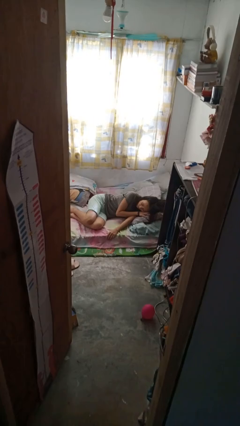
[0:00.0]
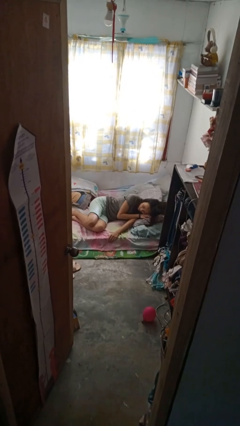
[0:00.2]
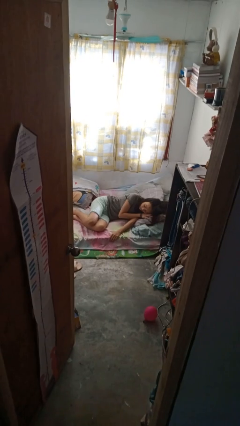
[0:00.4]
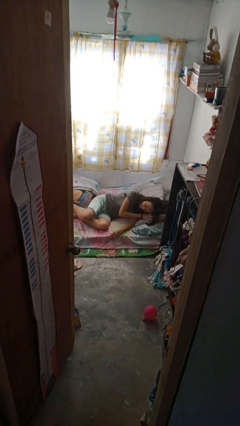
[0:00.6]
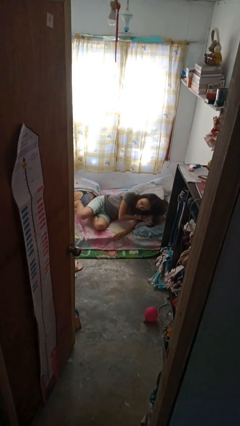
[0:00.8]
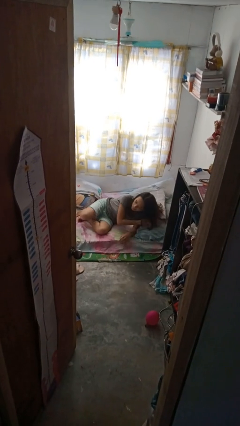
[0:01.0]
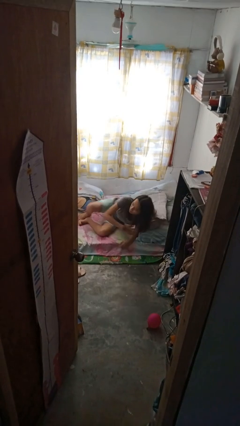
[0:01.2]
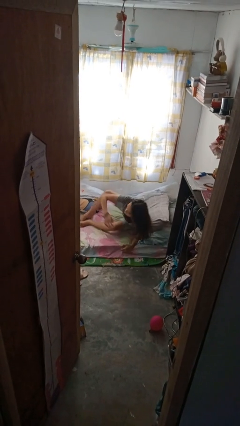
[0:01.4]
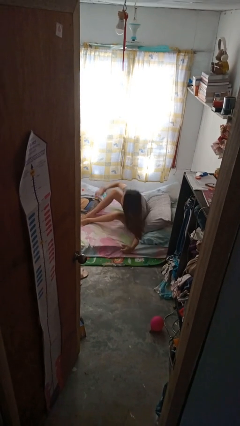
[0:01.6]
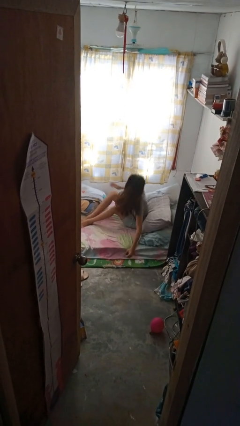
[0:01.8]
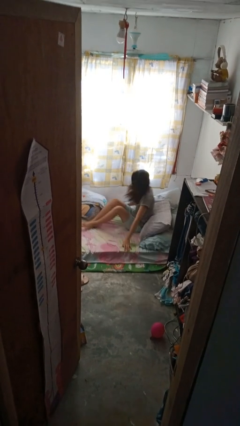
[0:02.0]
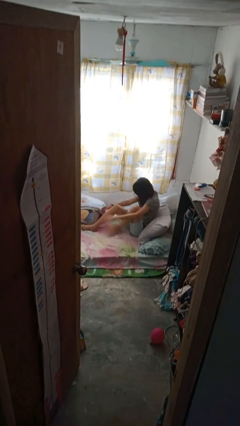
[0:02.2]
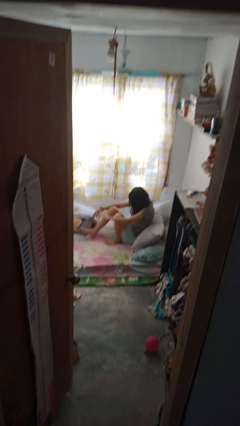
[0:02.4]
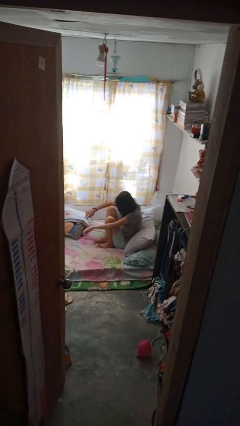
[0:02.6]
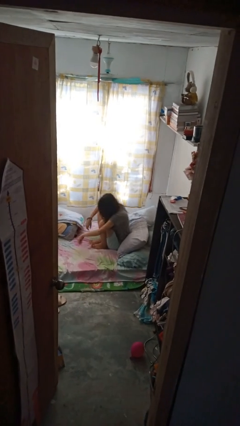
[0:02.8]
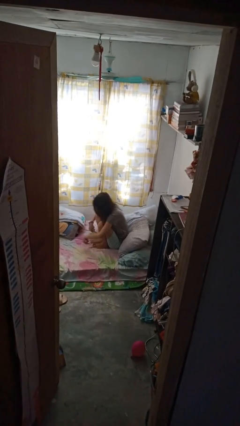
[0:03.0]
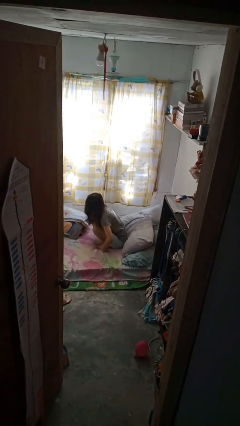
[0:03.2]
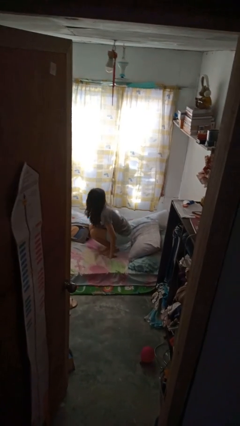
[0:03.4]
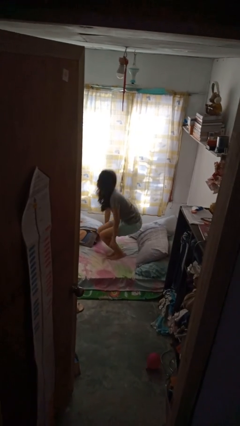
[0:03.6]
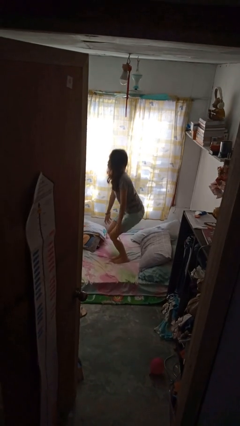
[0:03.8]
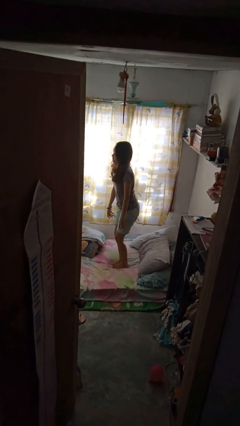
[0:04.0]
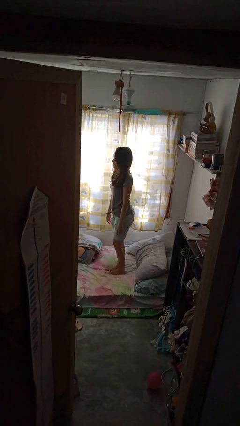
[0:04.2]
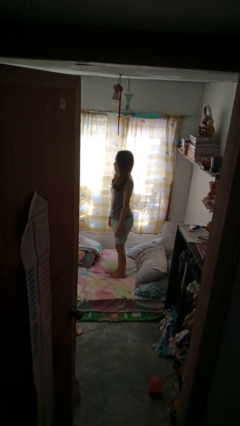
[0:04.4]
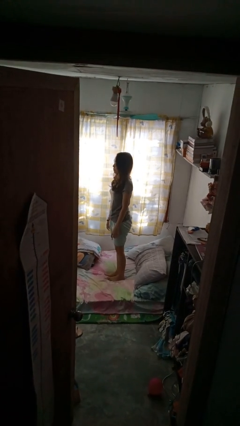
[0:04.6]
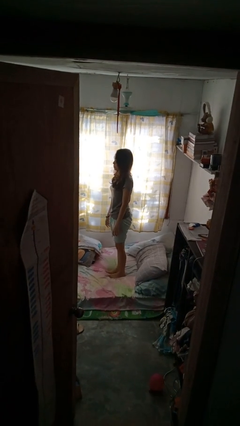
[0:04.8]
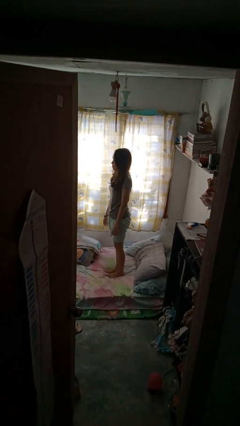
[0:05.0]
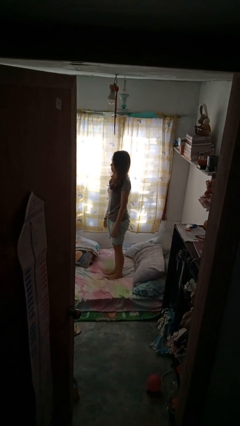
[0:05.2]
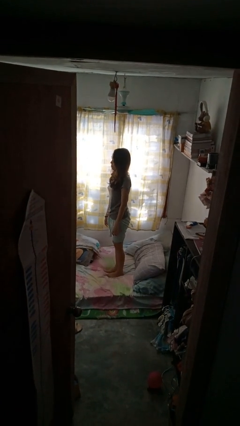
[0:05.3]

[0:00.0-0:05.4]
person stands up

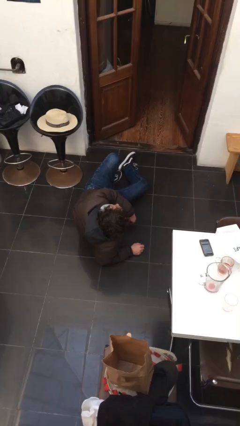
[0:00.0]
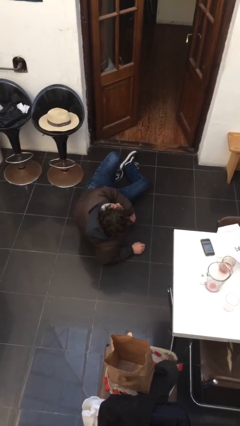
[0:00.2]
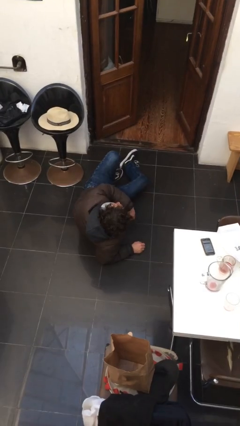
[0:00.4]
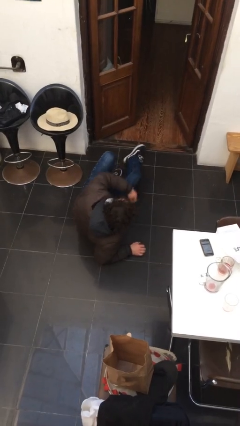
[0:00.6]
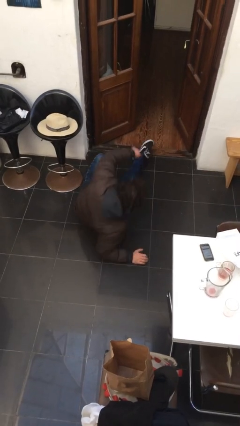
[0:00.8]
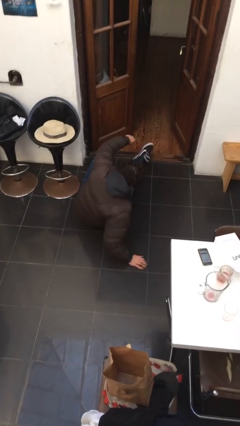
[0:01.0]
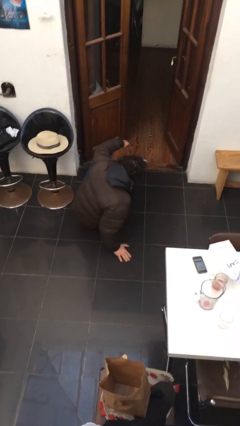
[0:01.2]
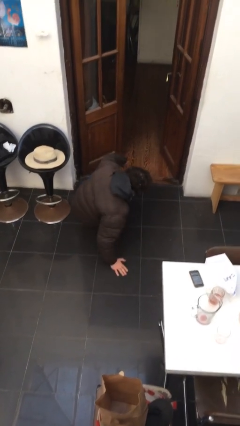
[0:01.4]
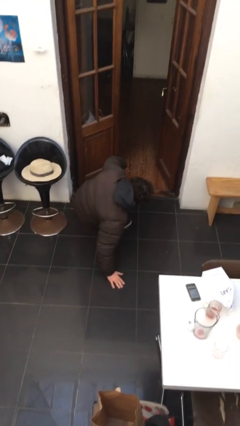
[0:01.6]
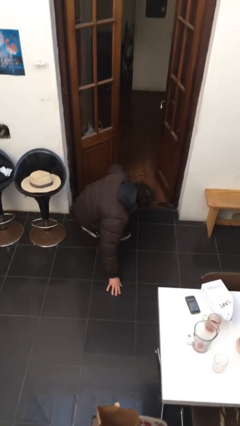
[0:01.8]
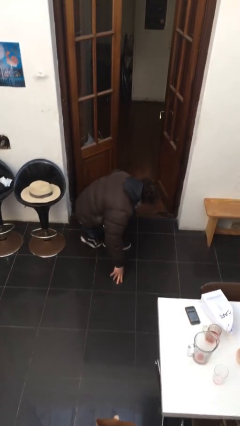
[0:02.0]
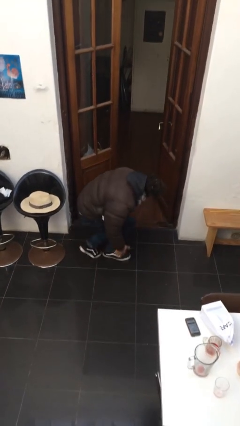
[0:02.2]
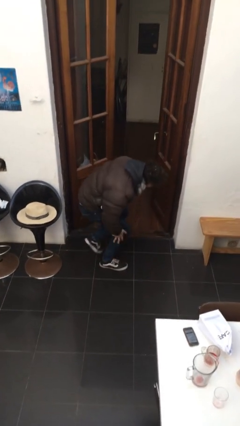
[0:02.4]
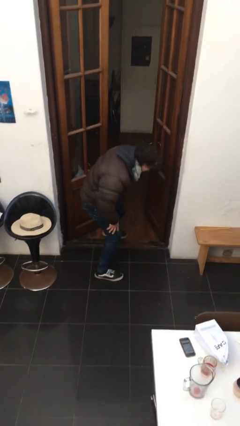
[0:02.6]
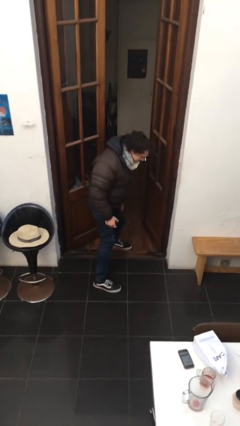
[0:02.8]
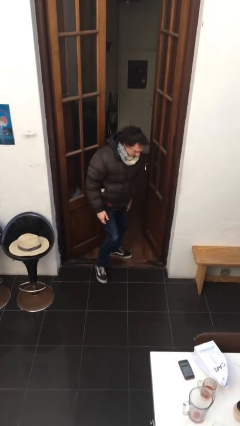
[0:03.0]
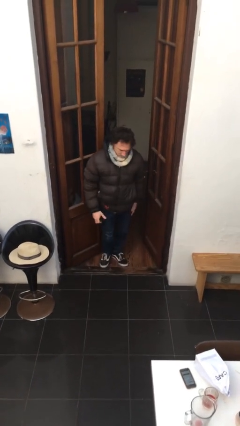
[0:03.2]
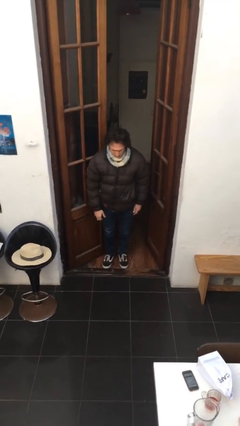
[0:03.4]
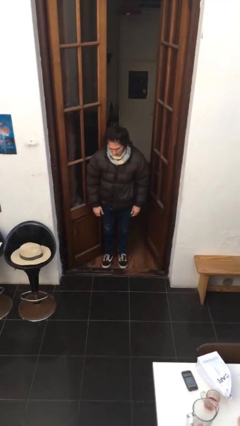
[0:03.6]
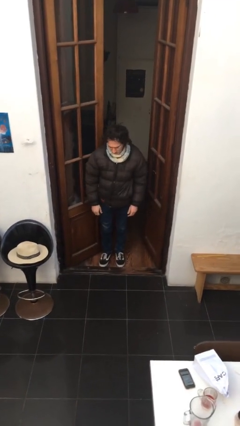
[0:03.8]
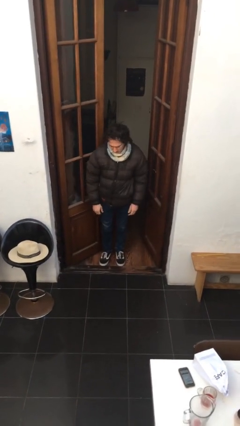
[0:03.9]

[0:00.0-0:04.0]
person stands up from floor

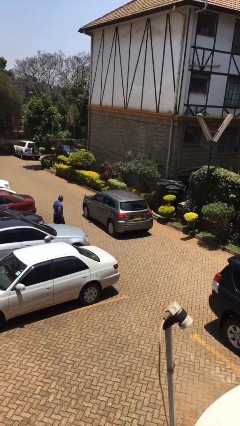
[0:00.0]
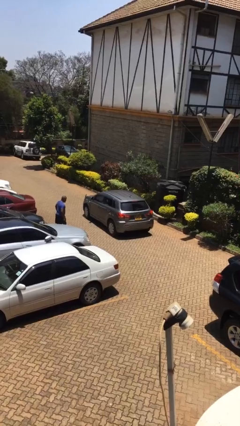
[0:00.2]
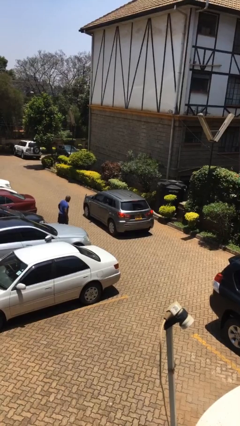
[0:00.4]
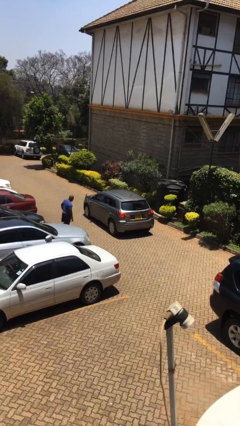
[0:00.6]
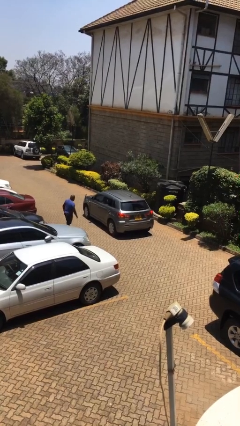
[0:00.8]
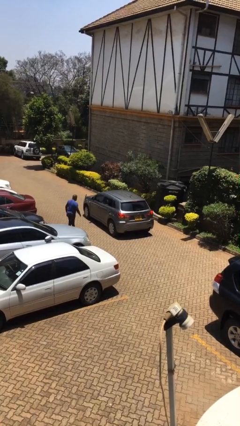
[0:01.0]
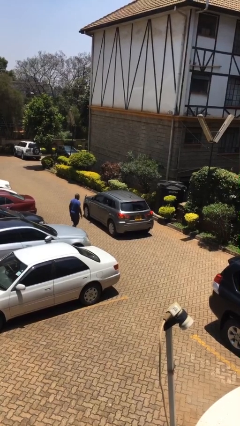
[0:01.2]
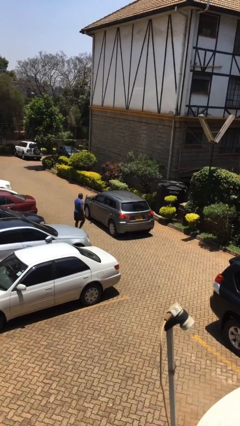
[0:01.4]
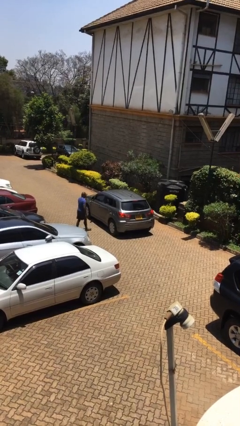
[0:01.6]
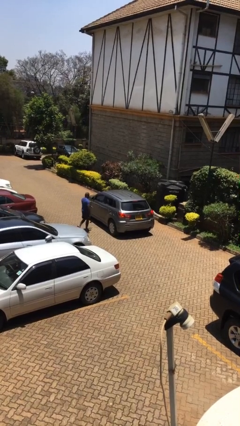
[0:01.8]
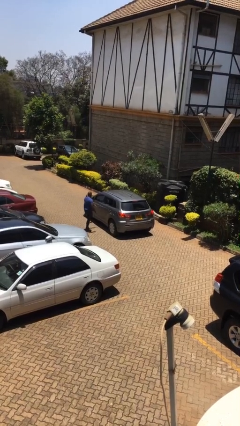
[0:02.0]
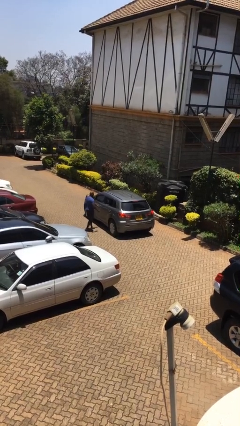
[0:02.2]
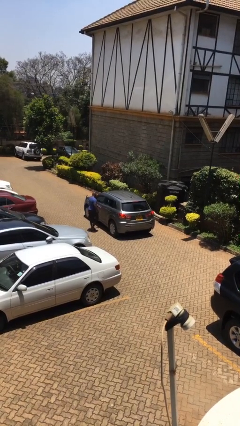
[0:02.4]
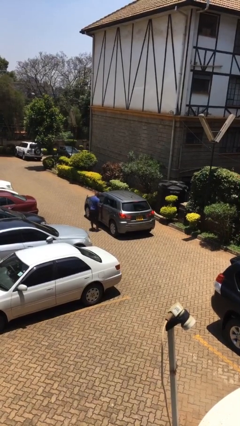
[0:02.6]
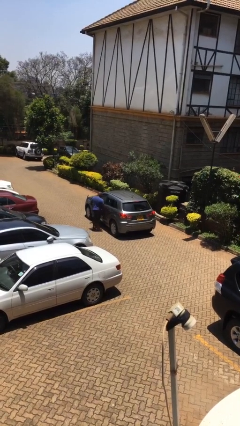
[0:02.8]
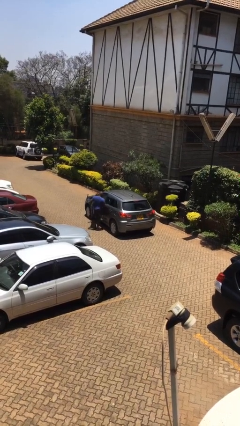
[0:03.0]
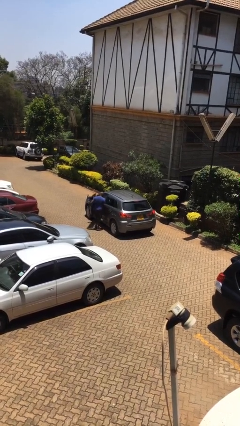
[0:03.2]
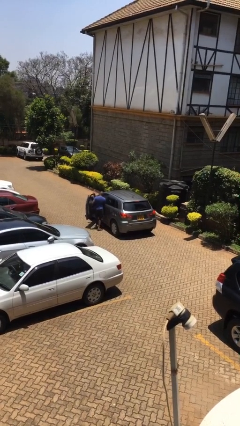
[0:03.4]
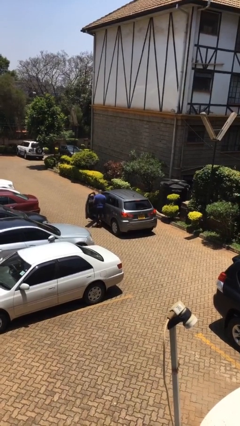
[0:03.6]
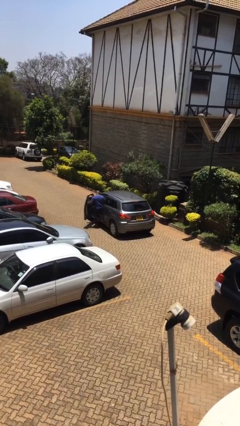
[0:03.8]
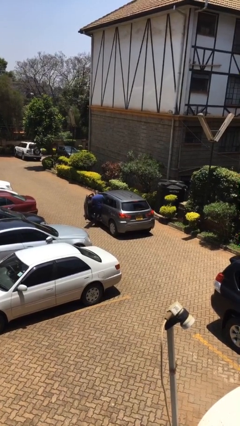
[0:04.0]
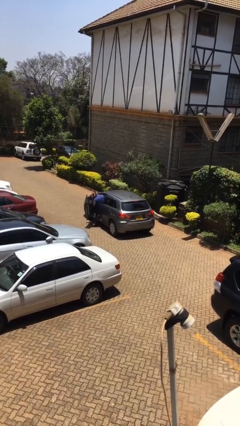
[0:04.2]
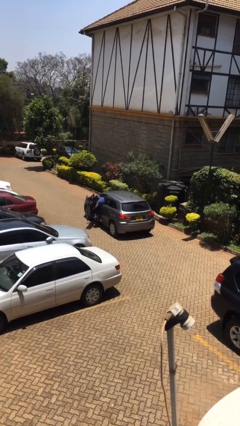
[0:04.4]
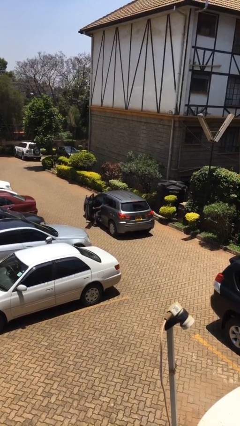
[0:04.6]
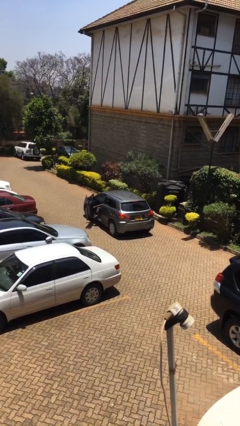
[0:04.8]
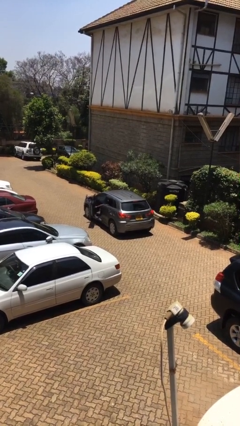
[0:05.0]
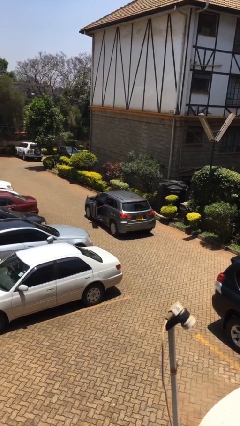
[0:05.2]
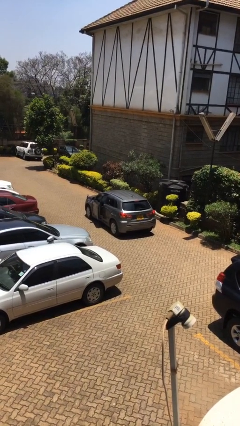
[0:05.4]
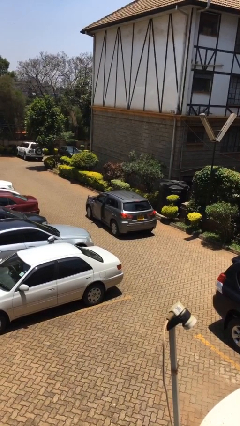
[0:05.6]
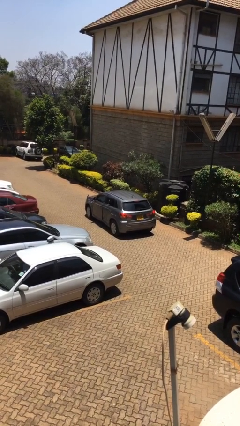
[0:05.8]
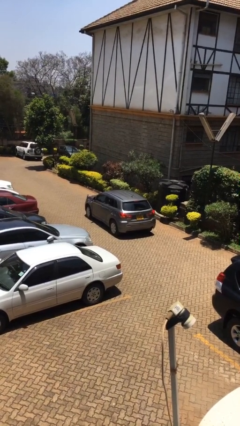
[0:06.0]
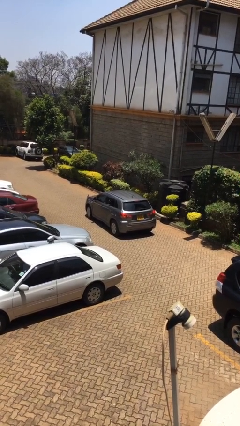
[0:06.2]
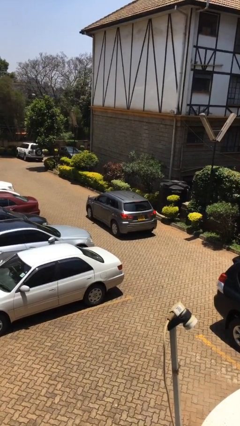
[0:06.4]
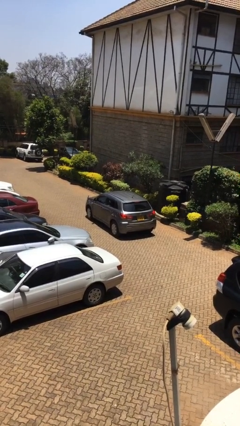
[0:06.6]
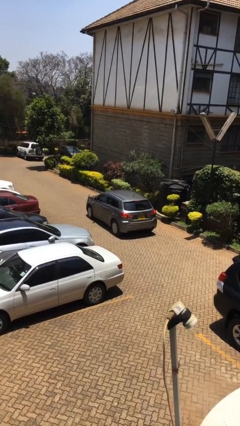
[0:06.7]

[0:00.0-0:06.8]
car picks up person

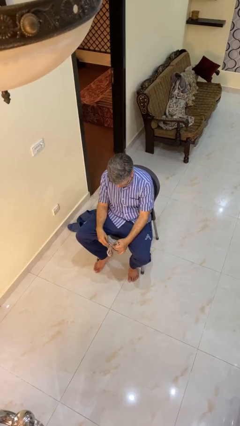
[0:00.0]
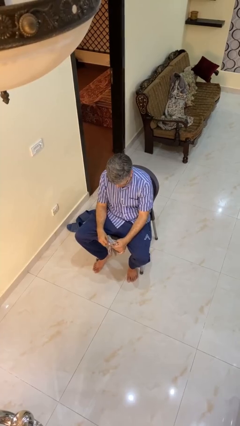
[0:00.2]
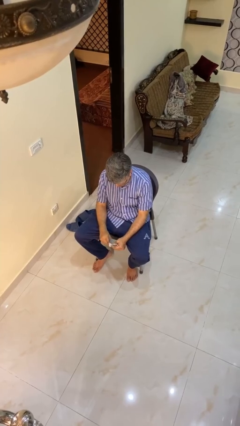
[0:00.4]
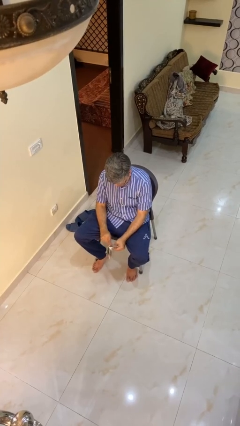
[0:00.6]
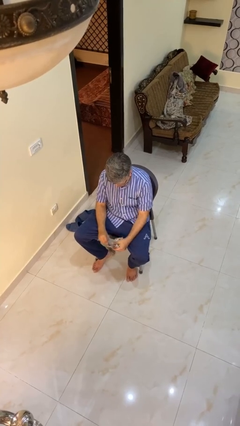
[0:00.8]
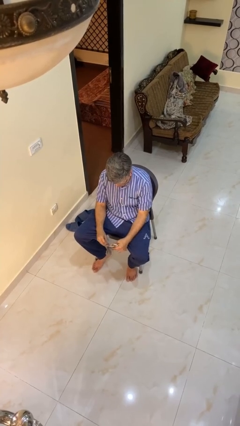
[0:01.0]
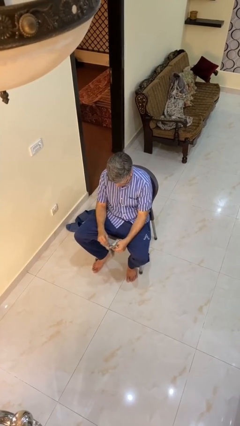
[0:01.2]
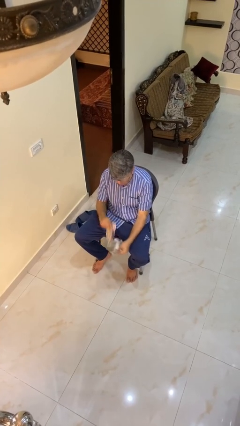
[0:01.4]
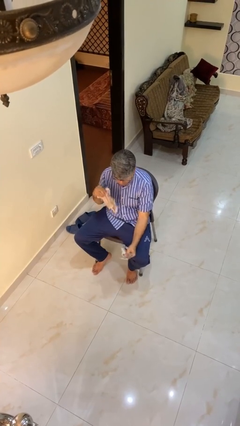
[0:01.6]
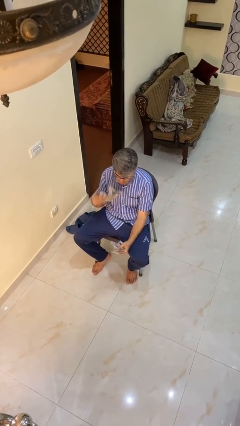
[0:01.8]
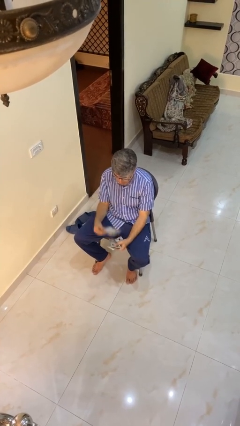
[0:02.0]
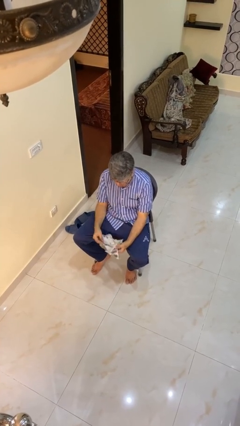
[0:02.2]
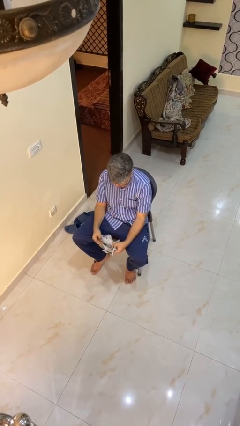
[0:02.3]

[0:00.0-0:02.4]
person tears paper
